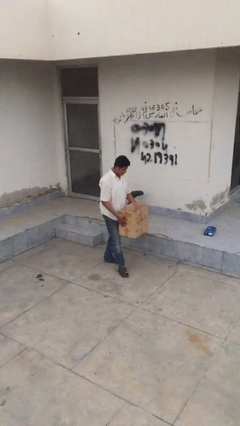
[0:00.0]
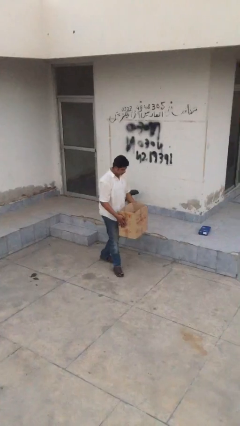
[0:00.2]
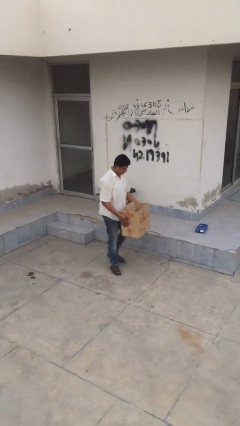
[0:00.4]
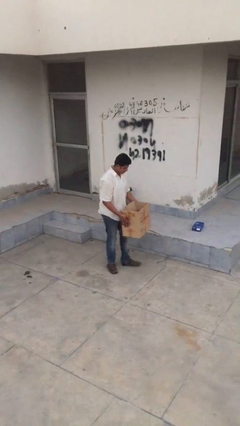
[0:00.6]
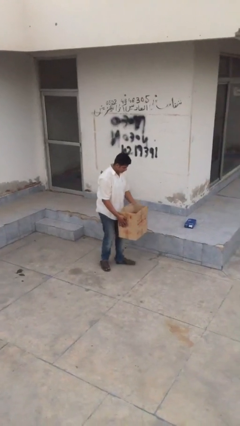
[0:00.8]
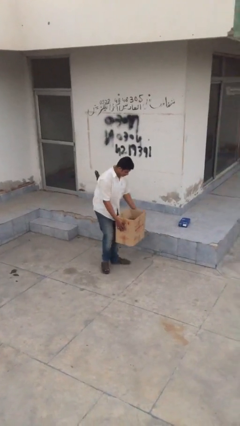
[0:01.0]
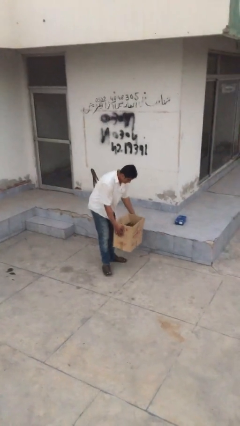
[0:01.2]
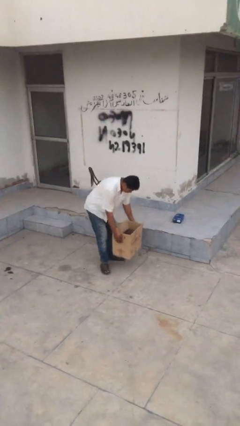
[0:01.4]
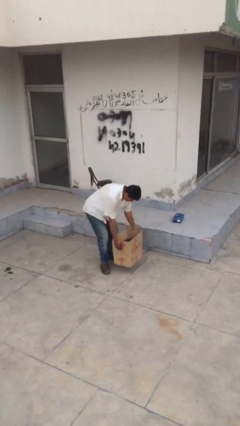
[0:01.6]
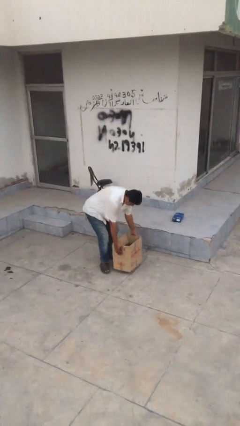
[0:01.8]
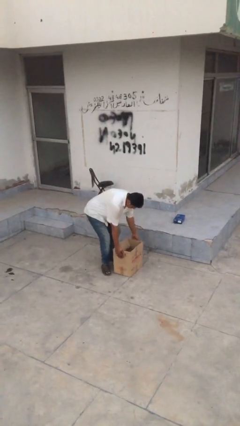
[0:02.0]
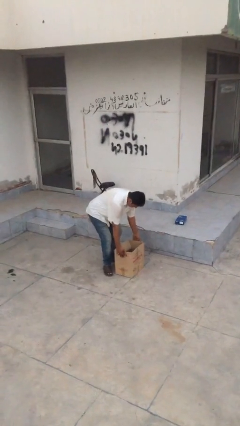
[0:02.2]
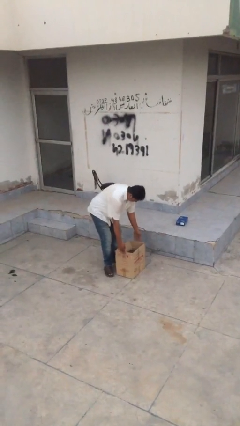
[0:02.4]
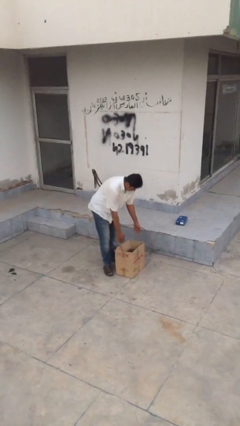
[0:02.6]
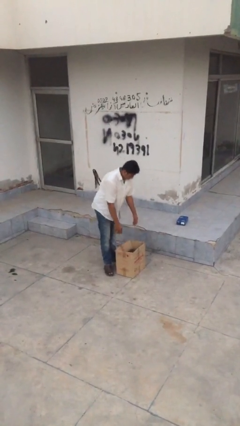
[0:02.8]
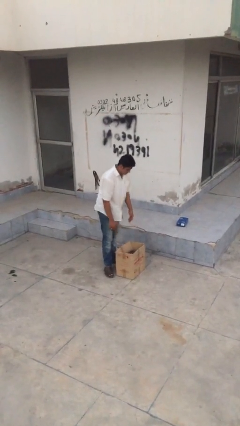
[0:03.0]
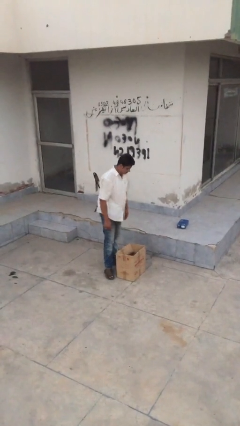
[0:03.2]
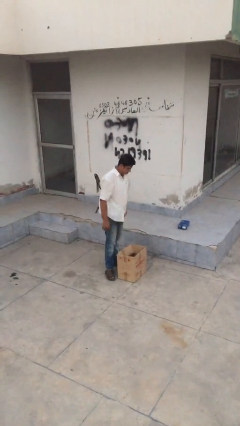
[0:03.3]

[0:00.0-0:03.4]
person puts down object on floor

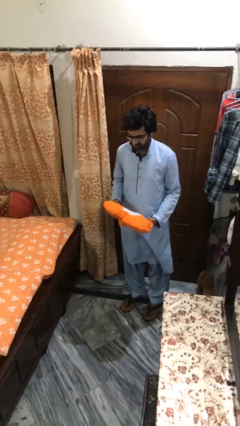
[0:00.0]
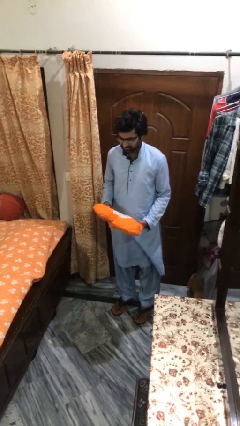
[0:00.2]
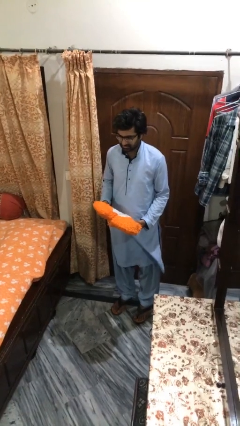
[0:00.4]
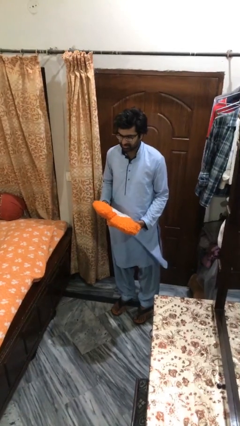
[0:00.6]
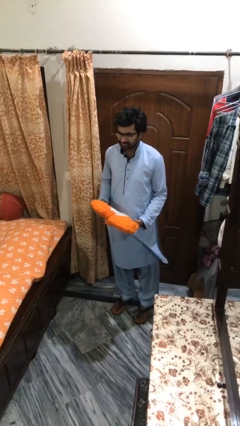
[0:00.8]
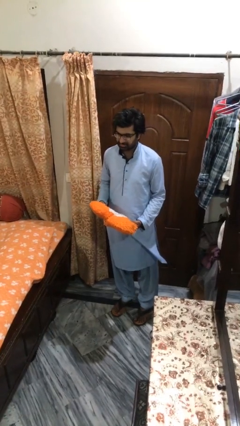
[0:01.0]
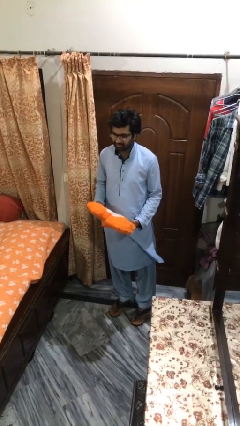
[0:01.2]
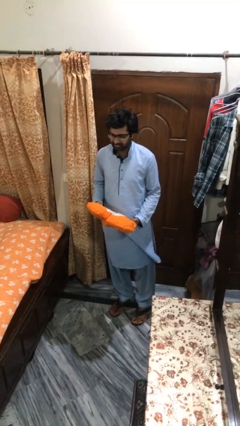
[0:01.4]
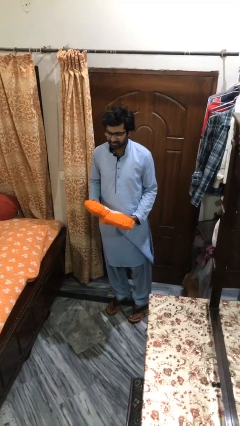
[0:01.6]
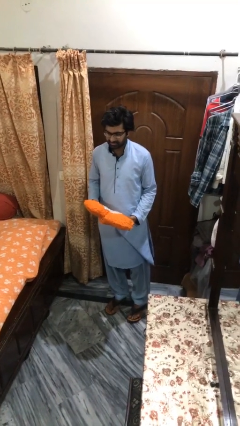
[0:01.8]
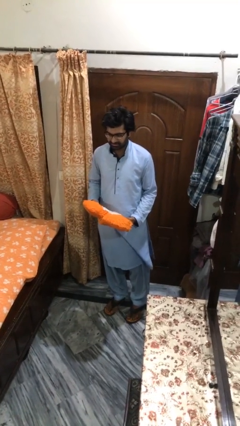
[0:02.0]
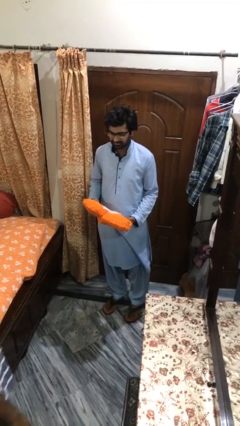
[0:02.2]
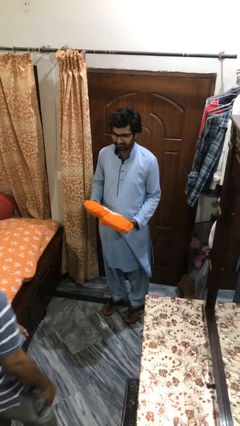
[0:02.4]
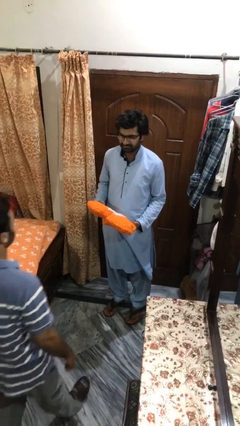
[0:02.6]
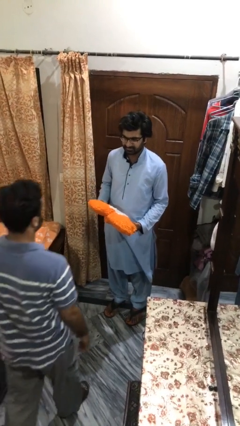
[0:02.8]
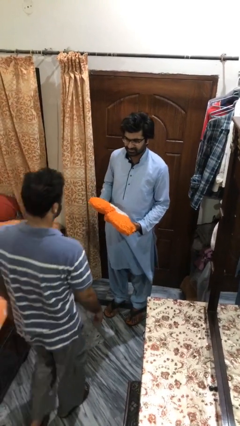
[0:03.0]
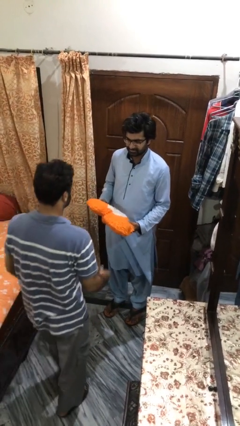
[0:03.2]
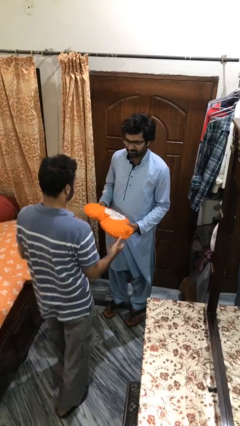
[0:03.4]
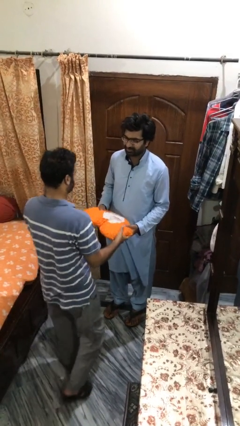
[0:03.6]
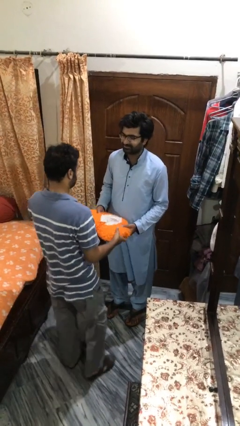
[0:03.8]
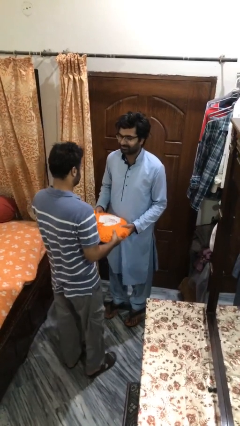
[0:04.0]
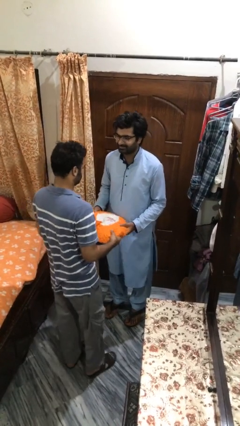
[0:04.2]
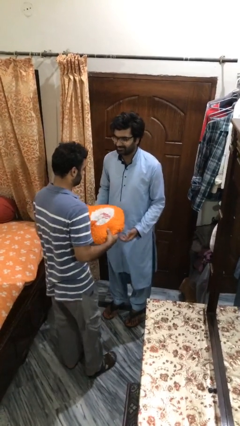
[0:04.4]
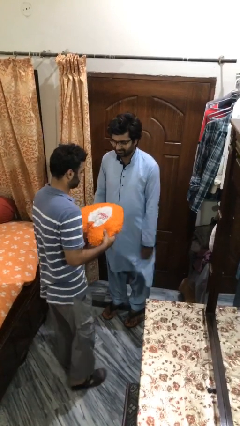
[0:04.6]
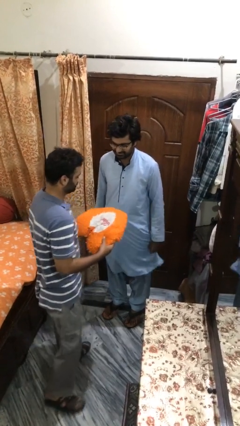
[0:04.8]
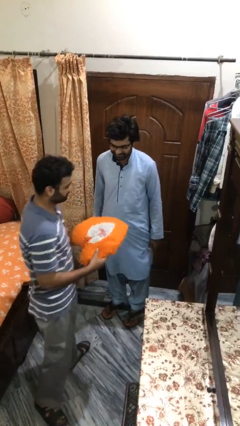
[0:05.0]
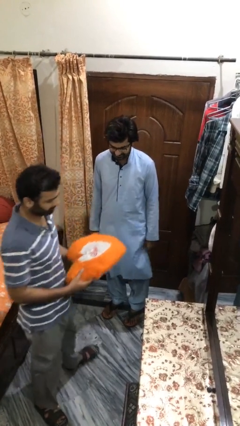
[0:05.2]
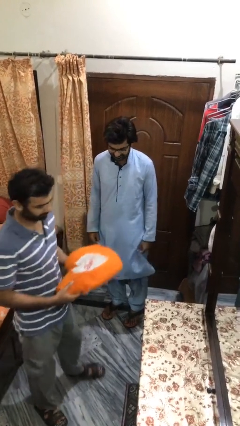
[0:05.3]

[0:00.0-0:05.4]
person transfers object to person

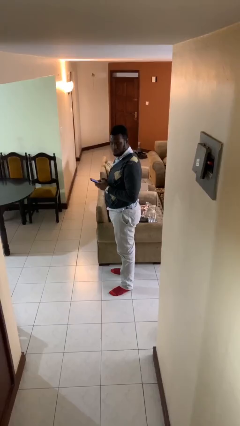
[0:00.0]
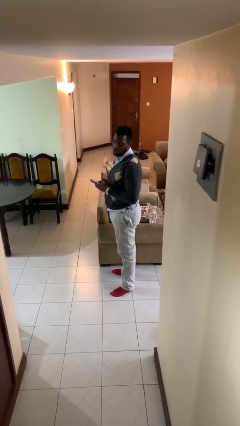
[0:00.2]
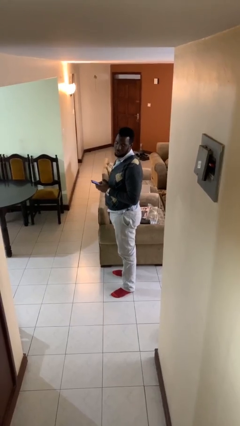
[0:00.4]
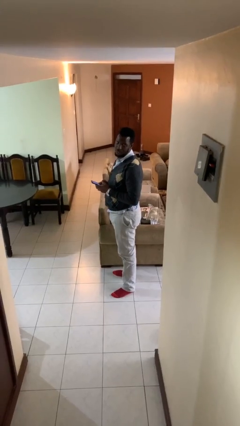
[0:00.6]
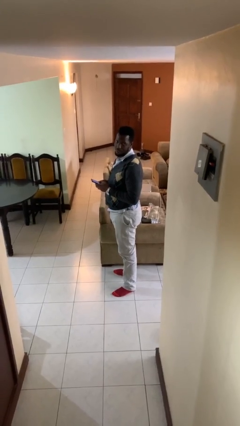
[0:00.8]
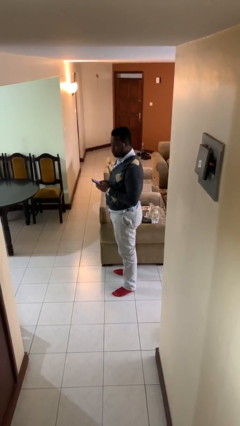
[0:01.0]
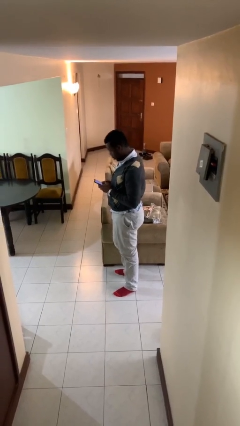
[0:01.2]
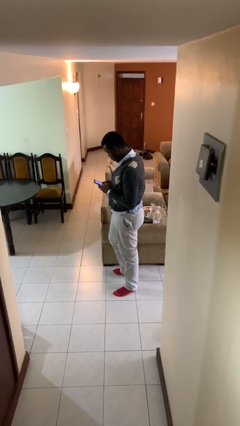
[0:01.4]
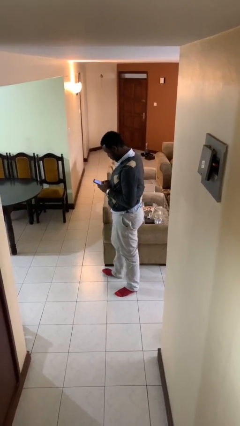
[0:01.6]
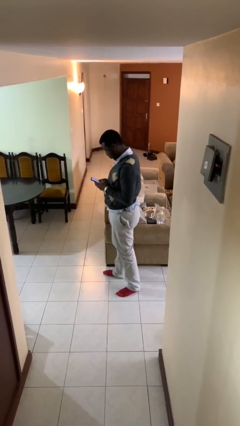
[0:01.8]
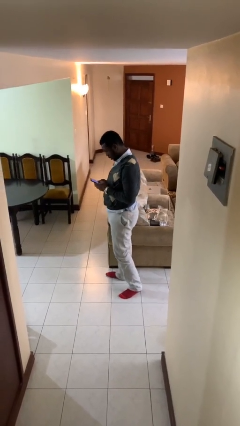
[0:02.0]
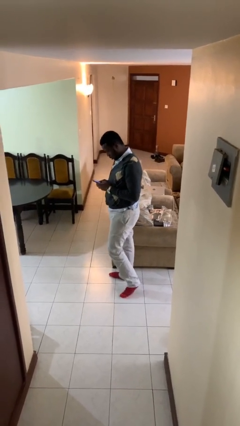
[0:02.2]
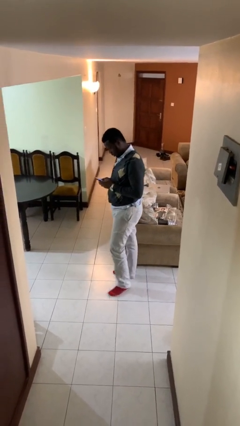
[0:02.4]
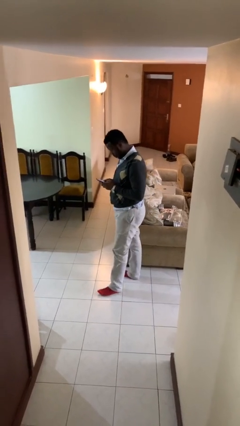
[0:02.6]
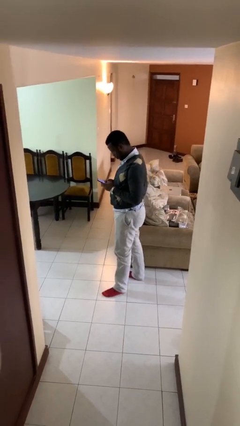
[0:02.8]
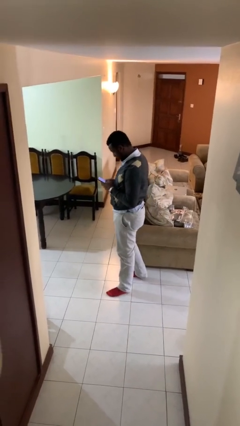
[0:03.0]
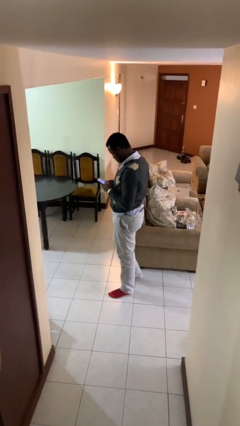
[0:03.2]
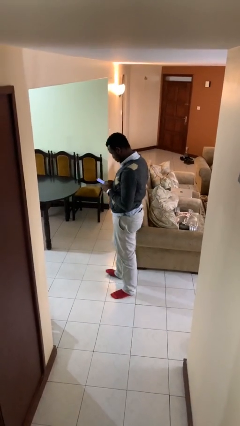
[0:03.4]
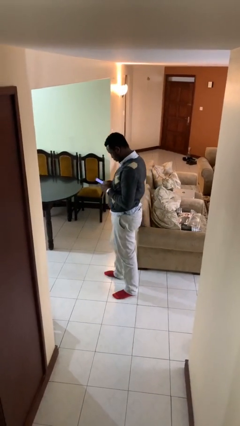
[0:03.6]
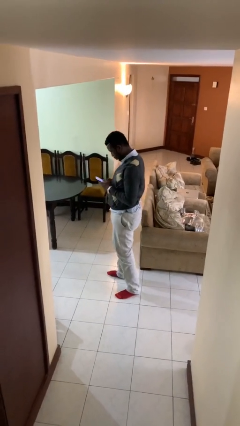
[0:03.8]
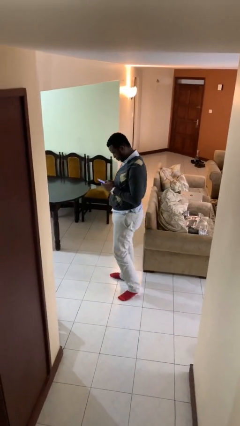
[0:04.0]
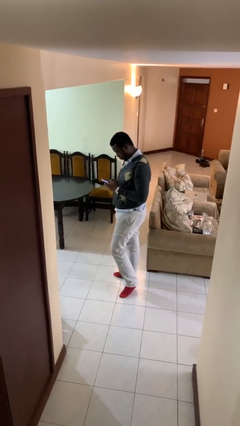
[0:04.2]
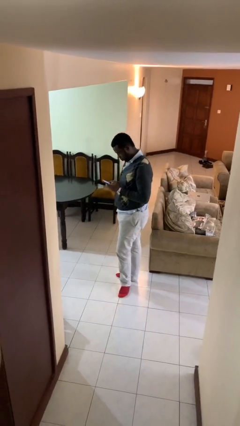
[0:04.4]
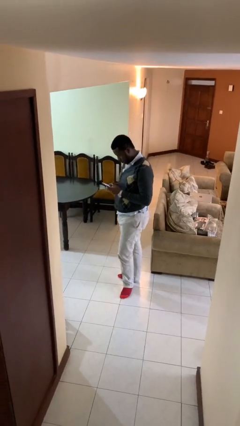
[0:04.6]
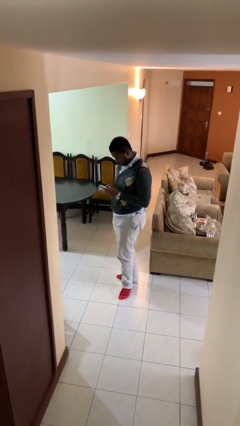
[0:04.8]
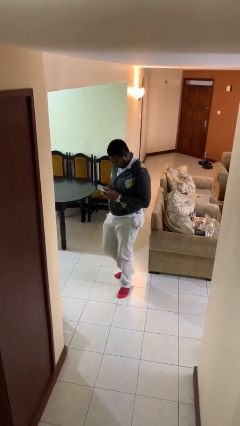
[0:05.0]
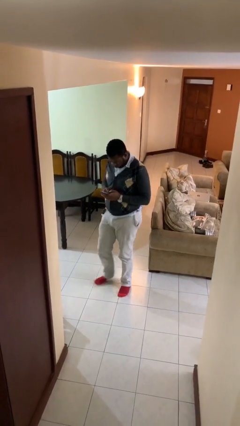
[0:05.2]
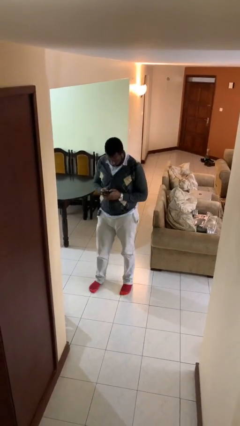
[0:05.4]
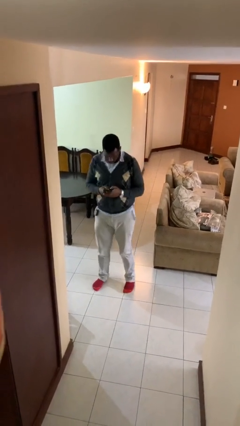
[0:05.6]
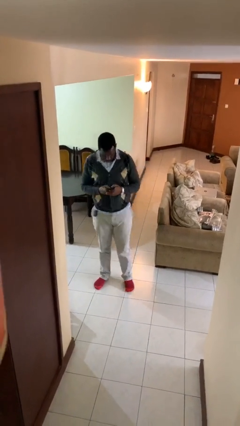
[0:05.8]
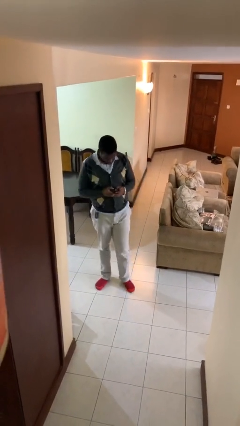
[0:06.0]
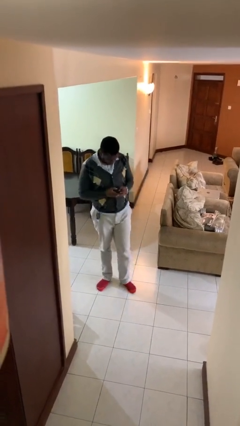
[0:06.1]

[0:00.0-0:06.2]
person texts on phone

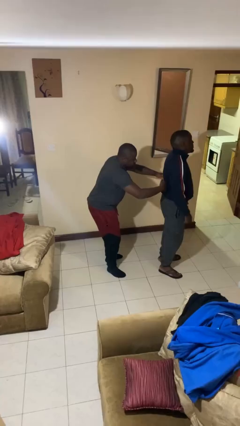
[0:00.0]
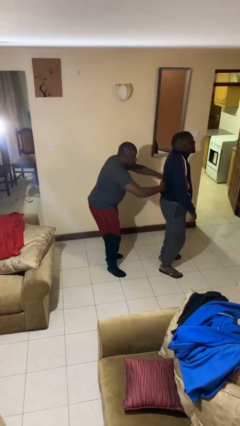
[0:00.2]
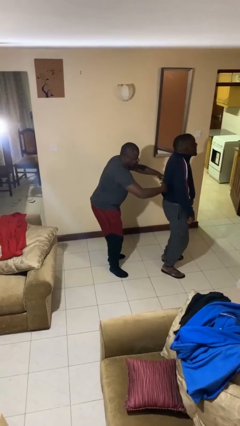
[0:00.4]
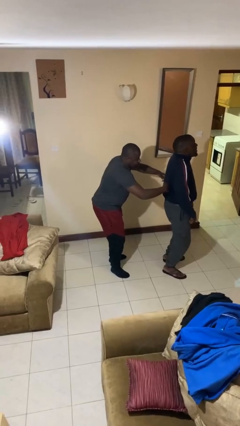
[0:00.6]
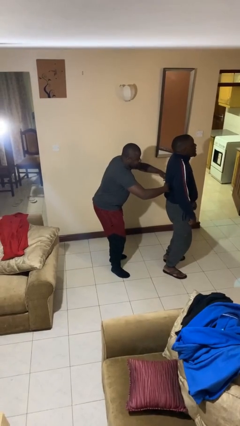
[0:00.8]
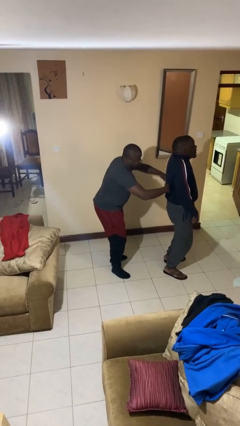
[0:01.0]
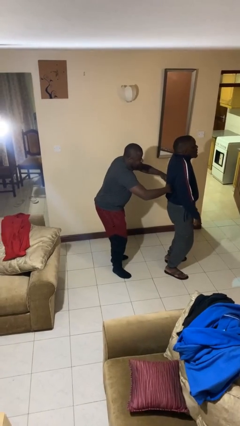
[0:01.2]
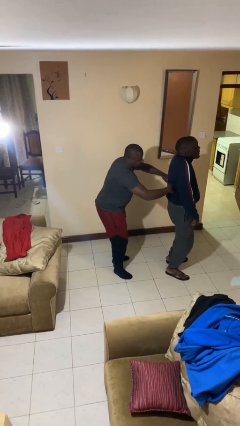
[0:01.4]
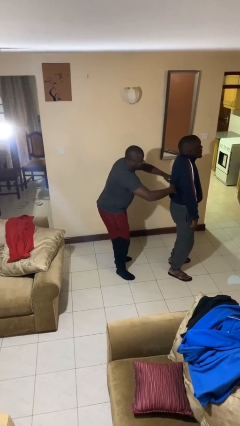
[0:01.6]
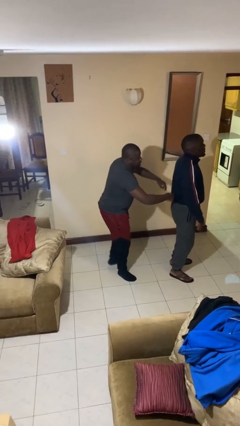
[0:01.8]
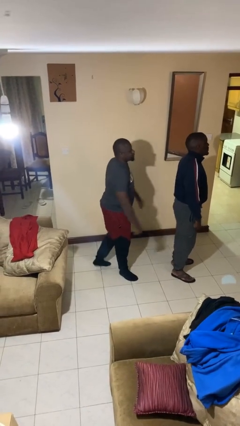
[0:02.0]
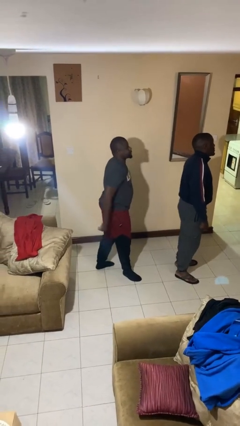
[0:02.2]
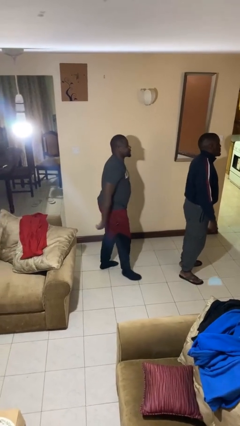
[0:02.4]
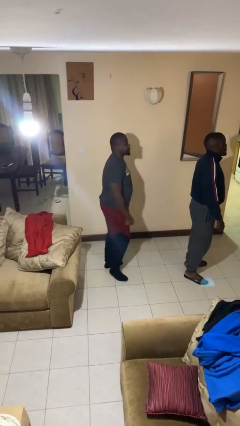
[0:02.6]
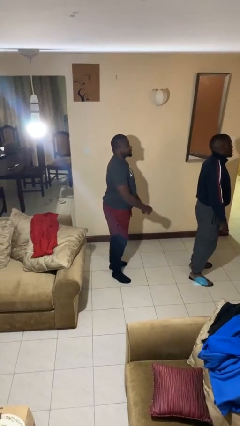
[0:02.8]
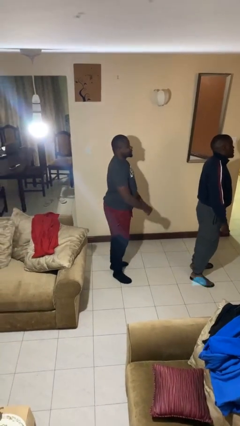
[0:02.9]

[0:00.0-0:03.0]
person tickles person
